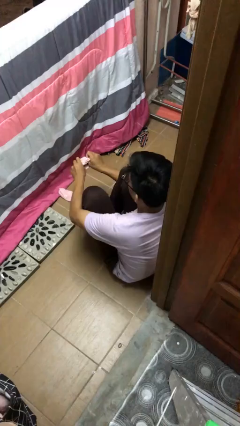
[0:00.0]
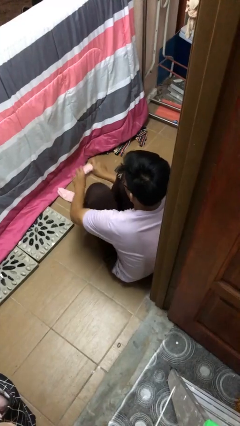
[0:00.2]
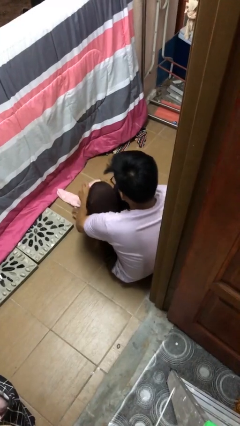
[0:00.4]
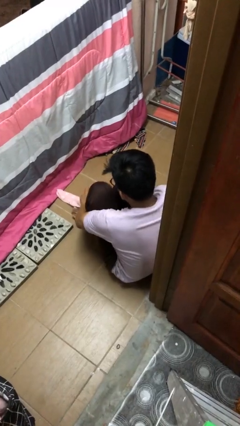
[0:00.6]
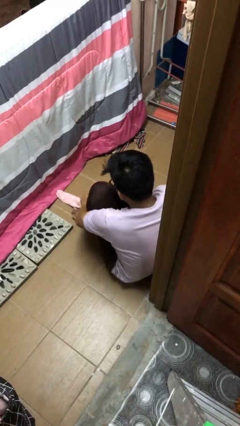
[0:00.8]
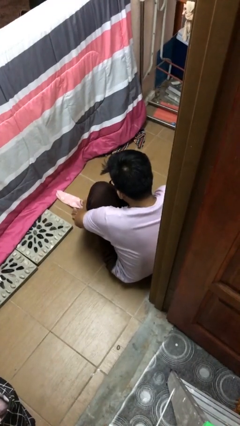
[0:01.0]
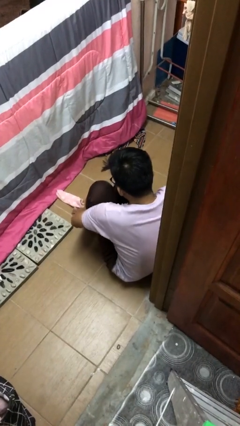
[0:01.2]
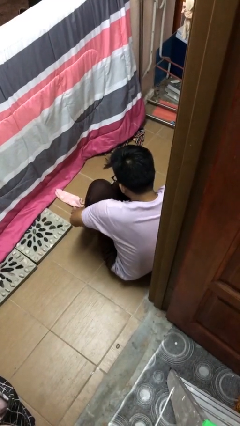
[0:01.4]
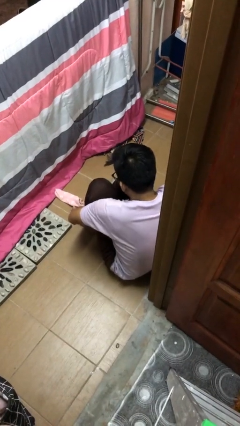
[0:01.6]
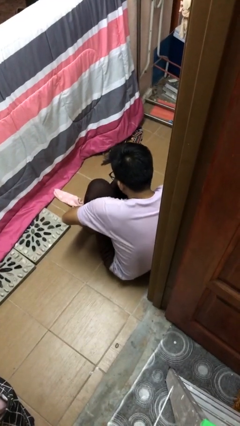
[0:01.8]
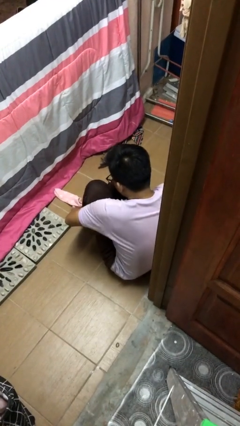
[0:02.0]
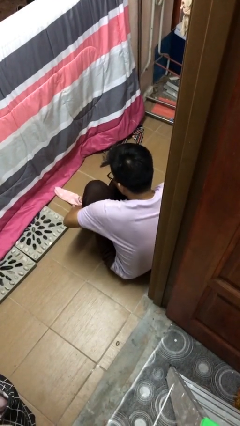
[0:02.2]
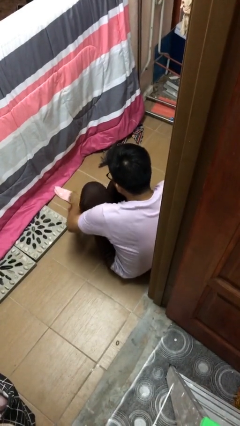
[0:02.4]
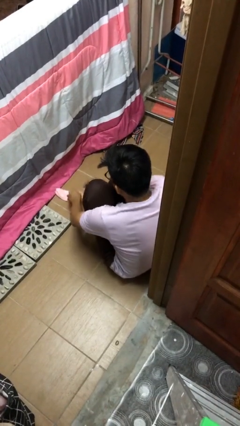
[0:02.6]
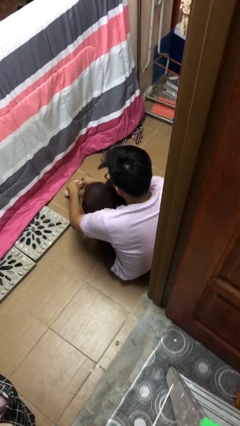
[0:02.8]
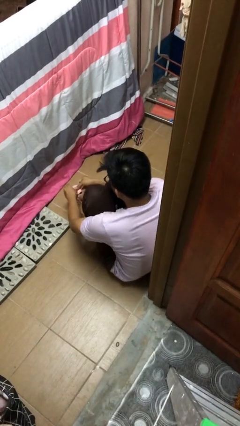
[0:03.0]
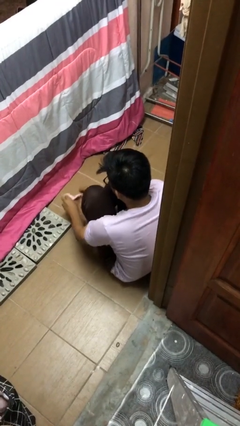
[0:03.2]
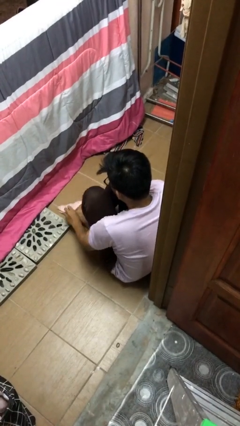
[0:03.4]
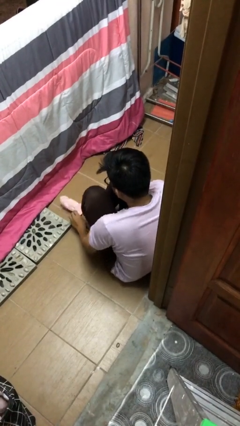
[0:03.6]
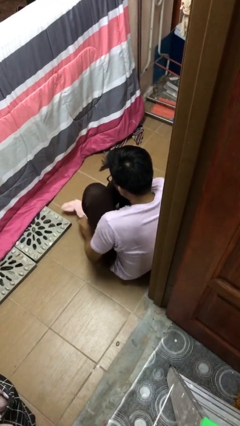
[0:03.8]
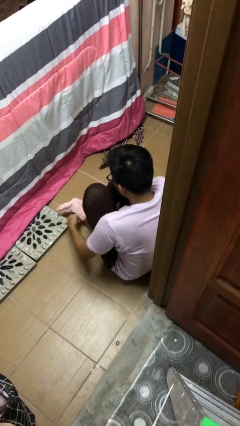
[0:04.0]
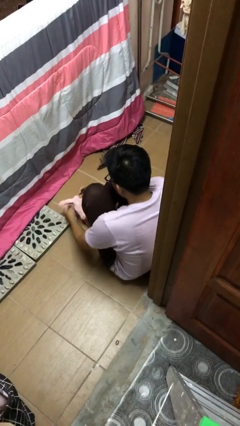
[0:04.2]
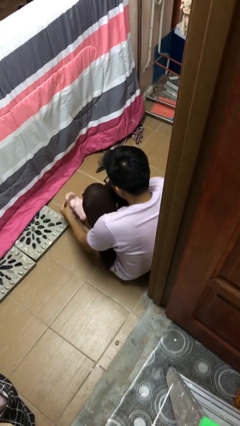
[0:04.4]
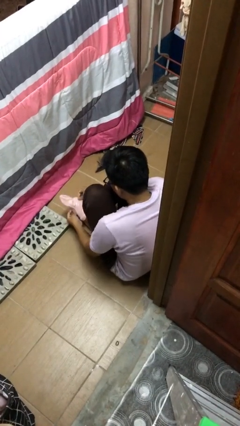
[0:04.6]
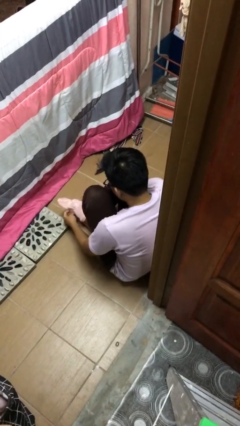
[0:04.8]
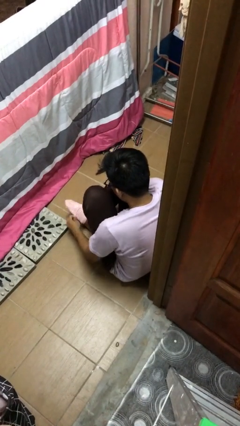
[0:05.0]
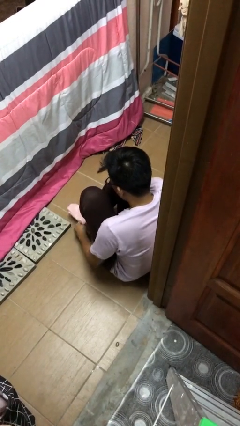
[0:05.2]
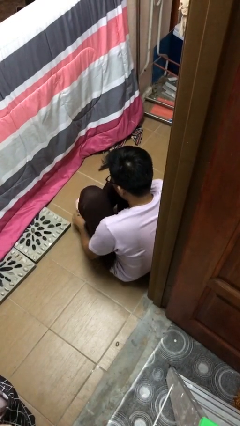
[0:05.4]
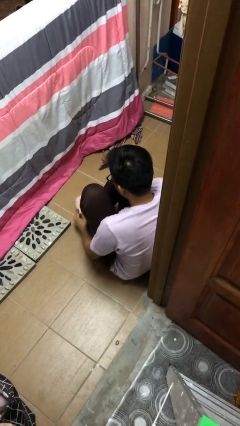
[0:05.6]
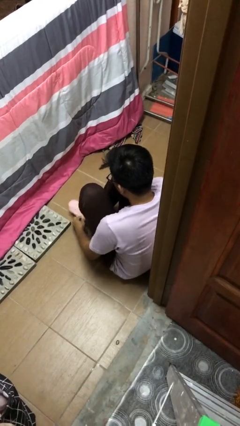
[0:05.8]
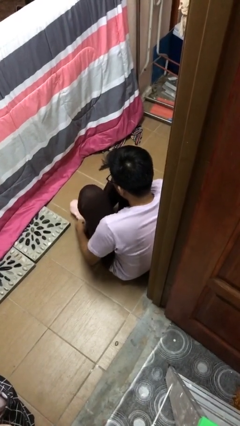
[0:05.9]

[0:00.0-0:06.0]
person puts on socks

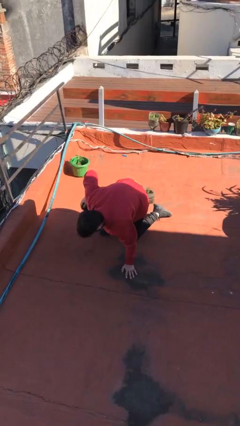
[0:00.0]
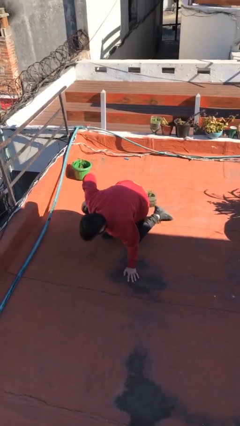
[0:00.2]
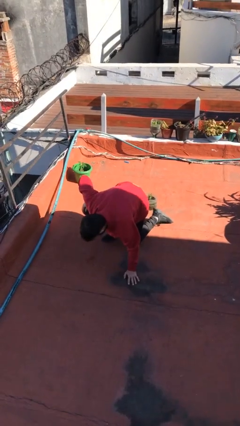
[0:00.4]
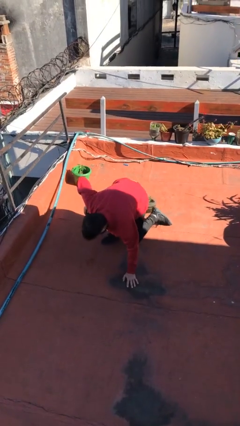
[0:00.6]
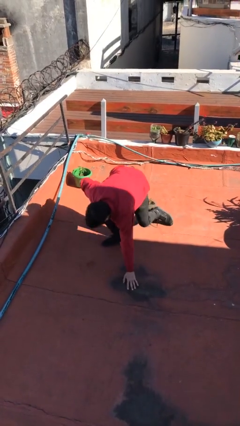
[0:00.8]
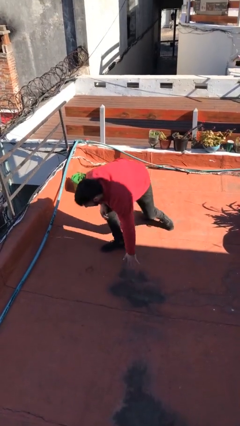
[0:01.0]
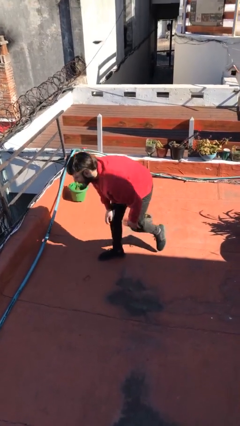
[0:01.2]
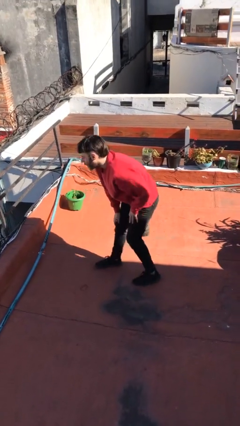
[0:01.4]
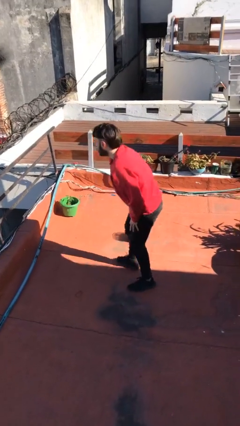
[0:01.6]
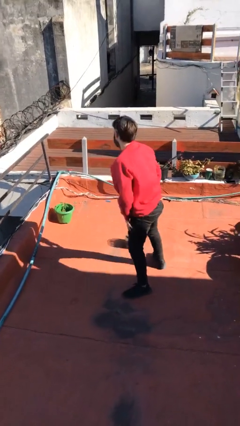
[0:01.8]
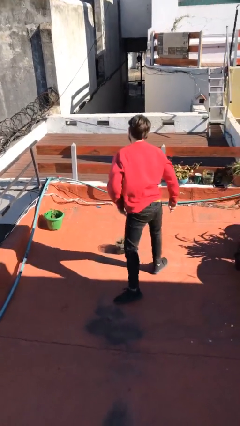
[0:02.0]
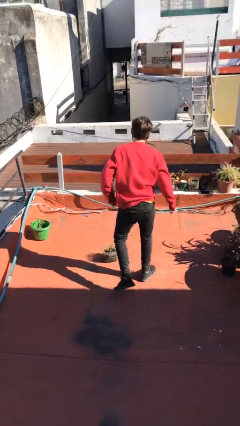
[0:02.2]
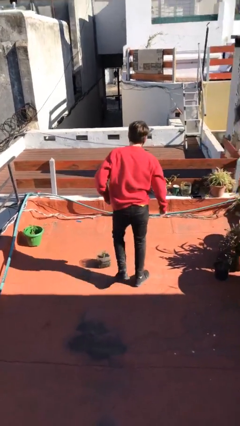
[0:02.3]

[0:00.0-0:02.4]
person stands up from floor

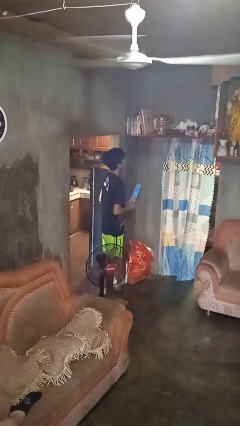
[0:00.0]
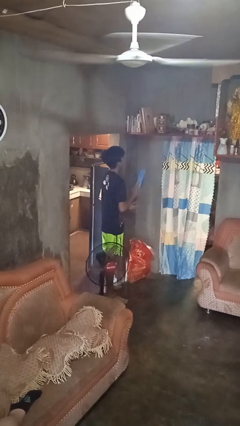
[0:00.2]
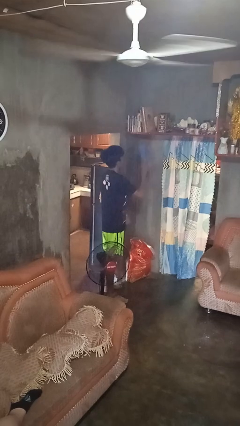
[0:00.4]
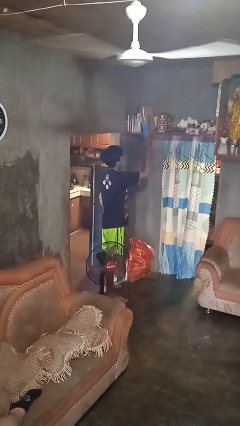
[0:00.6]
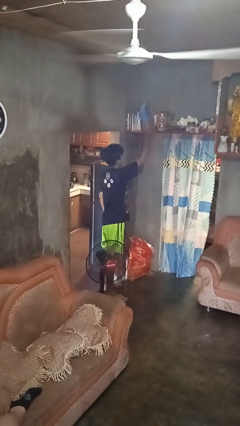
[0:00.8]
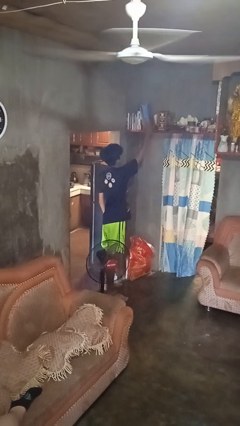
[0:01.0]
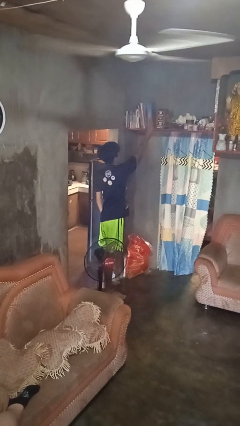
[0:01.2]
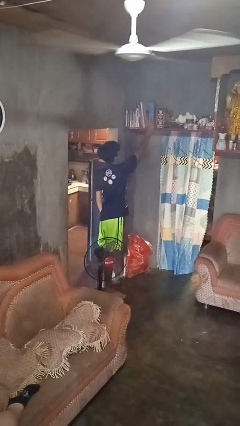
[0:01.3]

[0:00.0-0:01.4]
person puts down object on shelf

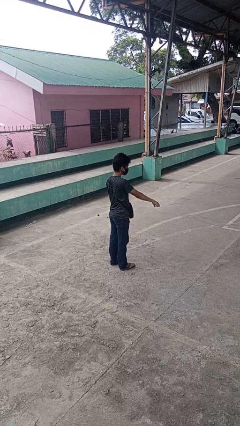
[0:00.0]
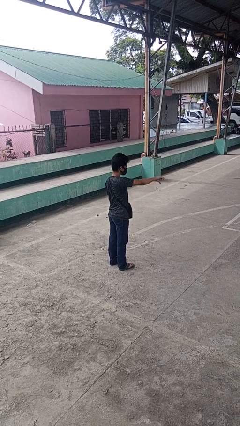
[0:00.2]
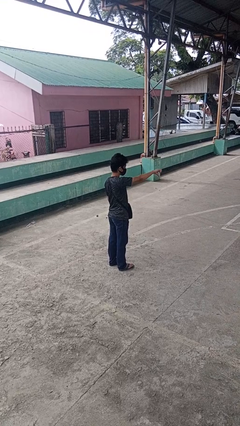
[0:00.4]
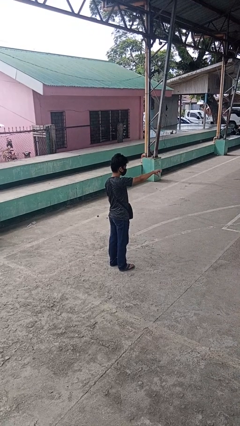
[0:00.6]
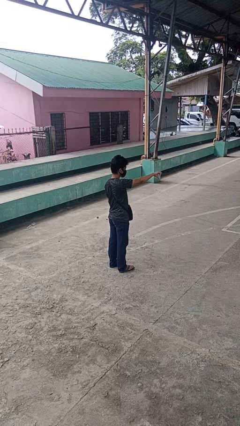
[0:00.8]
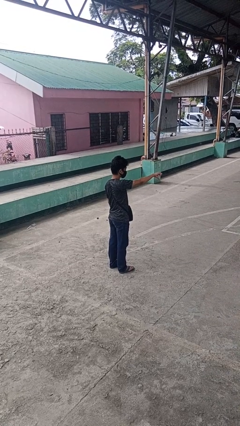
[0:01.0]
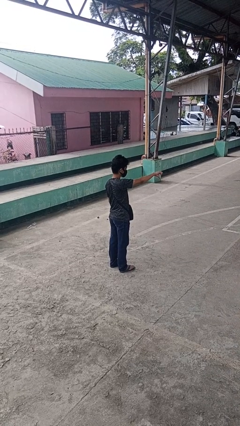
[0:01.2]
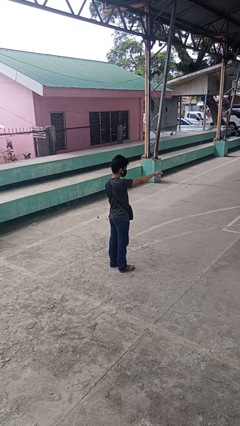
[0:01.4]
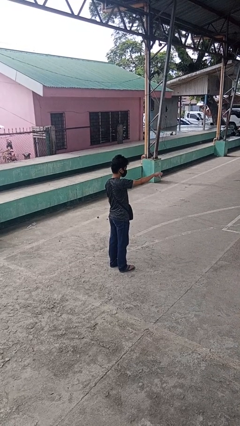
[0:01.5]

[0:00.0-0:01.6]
person gestures thumbs down

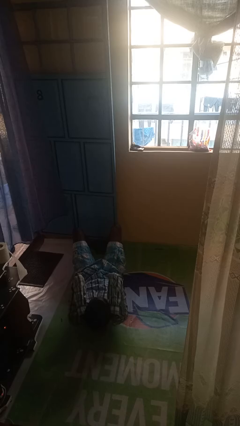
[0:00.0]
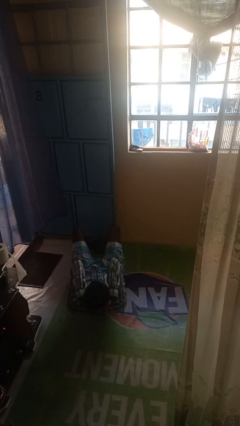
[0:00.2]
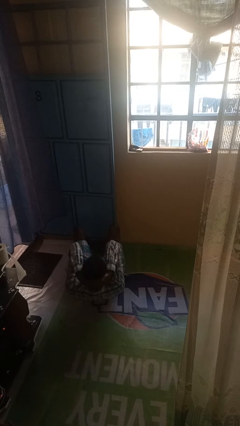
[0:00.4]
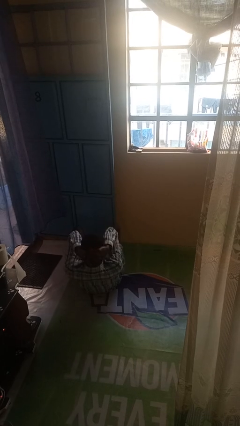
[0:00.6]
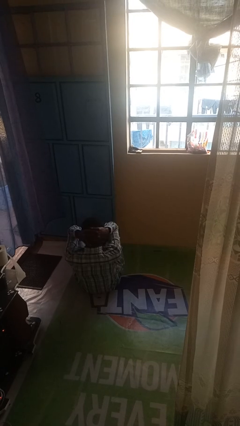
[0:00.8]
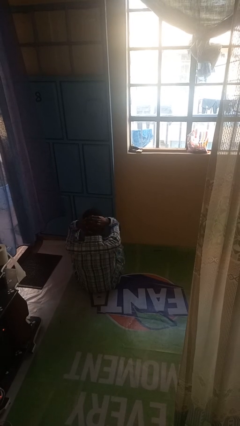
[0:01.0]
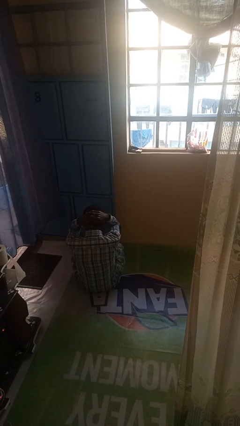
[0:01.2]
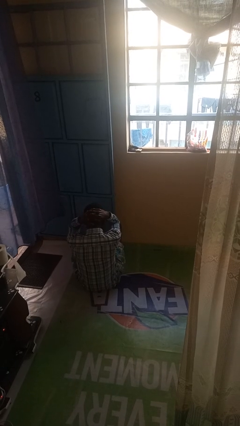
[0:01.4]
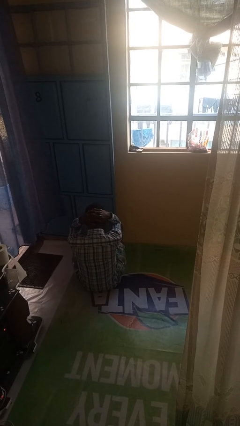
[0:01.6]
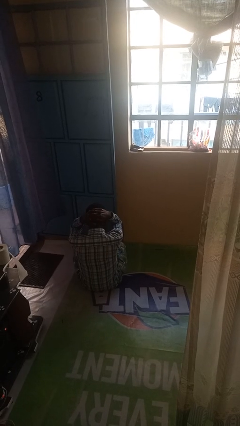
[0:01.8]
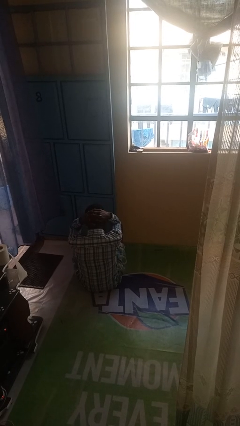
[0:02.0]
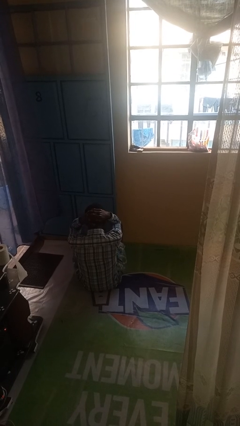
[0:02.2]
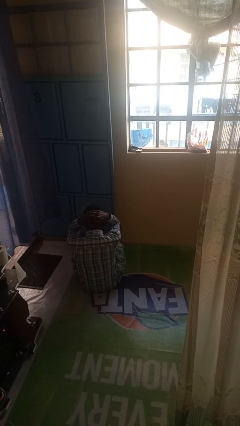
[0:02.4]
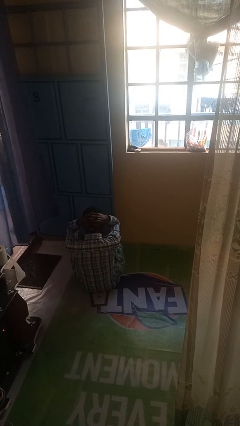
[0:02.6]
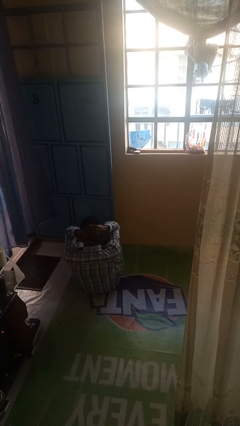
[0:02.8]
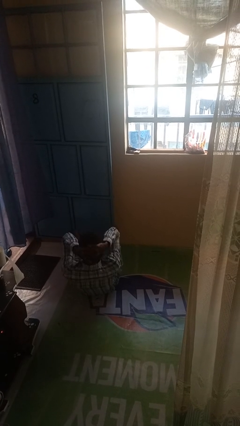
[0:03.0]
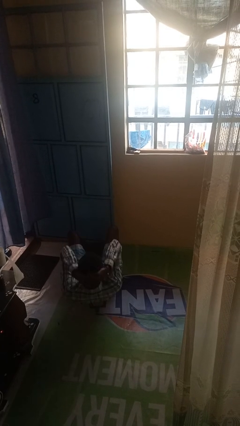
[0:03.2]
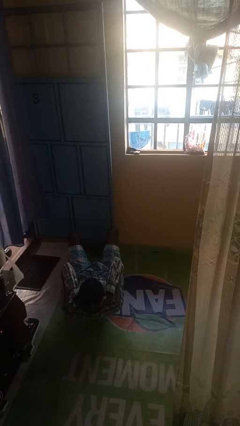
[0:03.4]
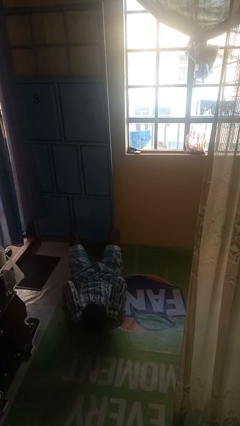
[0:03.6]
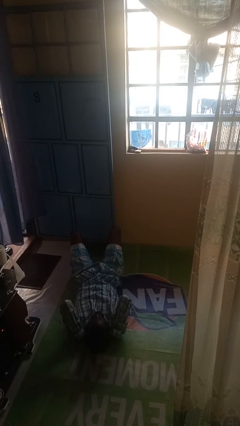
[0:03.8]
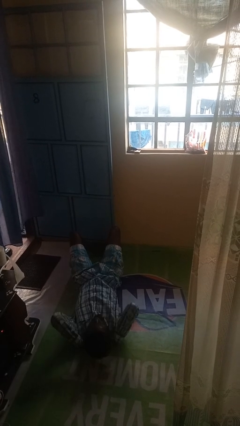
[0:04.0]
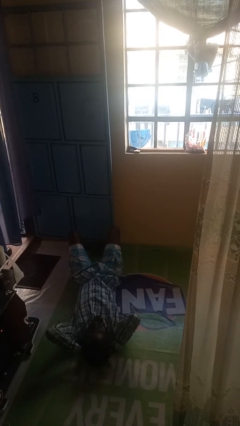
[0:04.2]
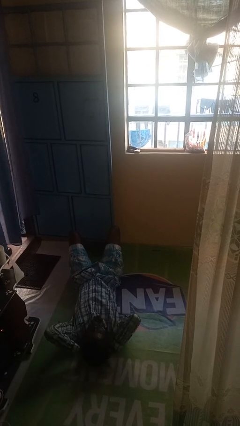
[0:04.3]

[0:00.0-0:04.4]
person exercises with situp

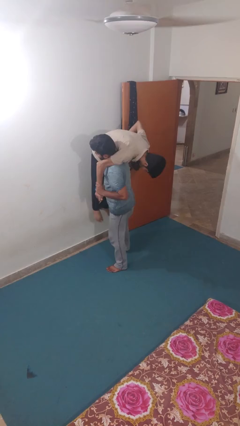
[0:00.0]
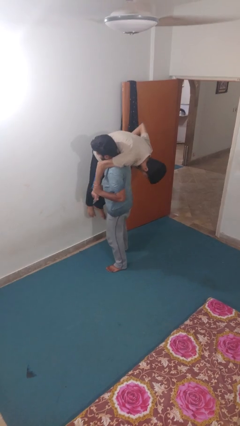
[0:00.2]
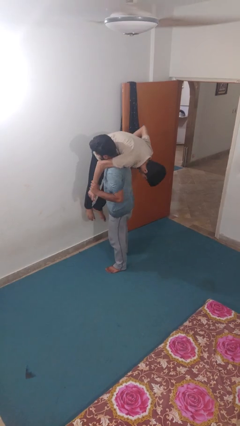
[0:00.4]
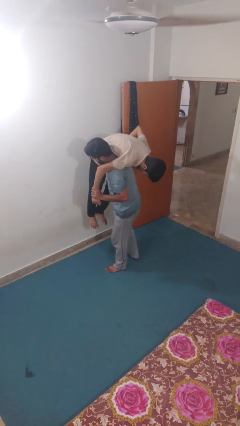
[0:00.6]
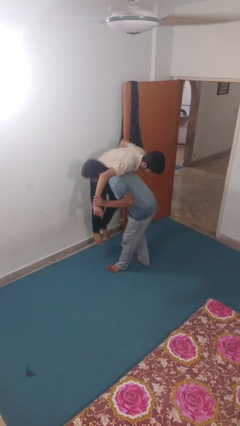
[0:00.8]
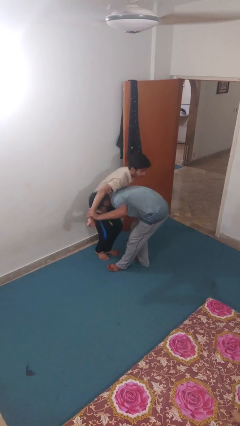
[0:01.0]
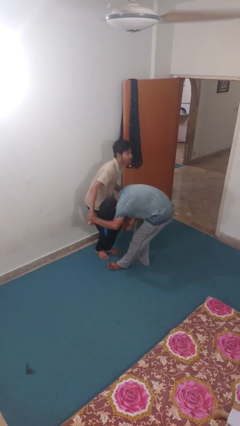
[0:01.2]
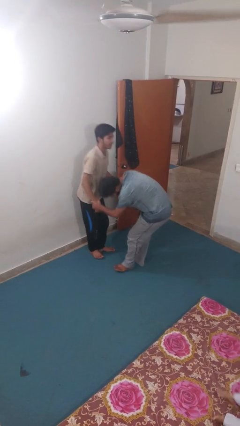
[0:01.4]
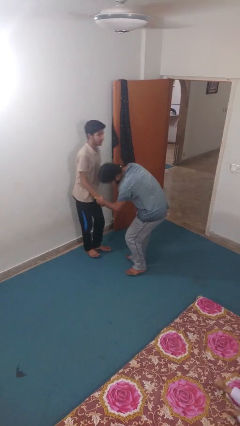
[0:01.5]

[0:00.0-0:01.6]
person puts down person

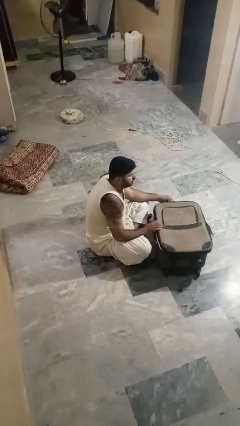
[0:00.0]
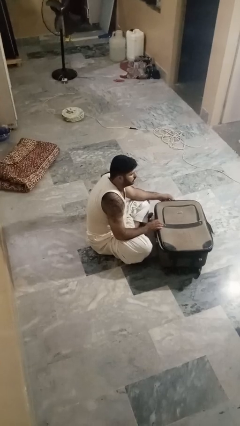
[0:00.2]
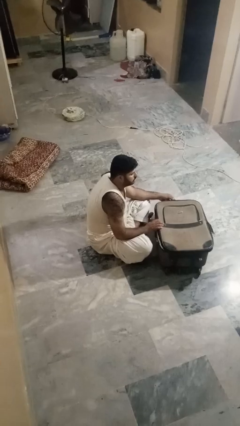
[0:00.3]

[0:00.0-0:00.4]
person closes suitcase
